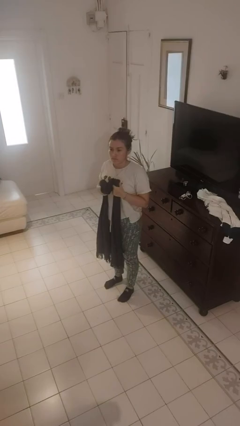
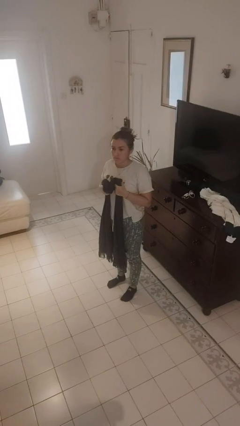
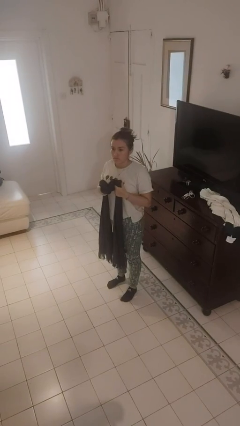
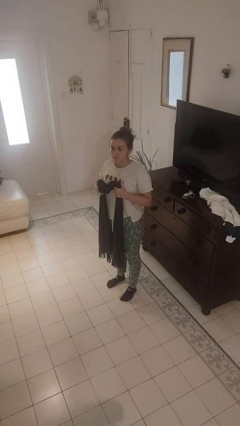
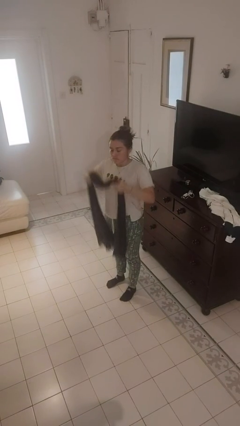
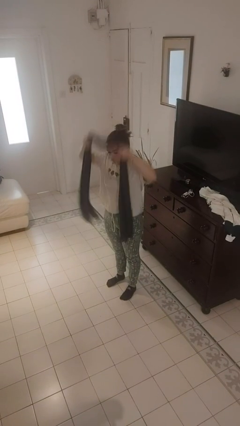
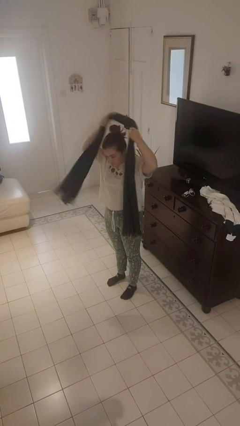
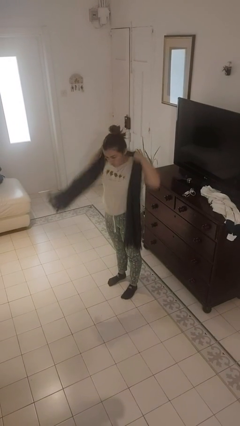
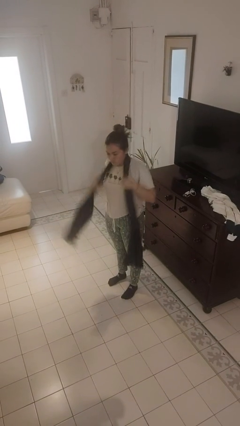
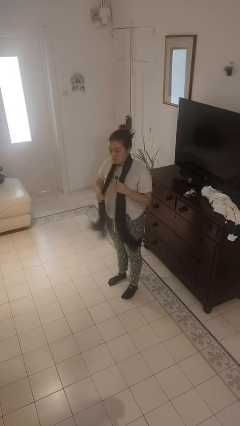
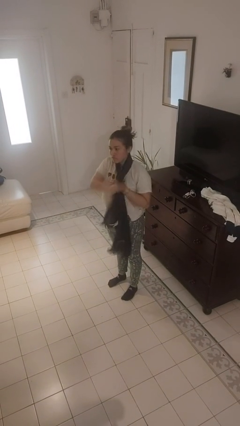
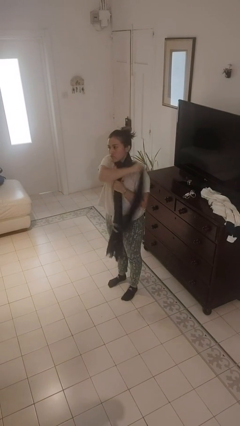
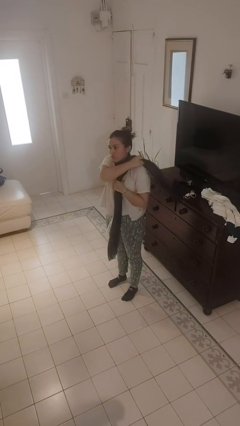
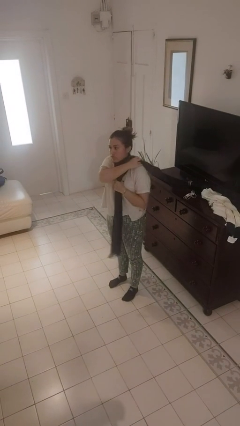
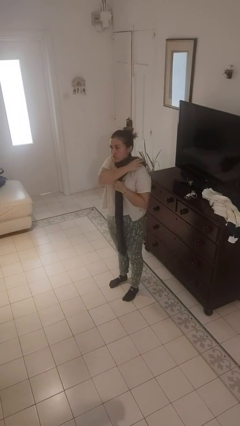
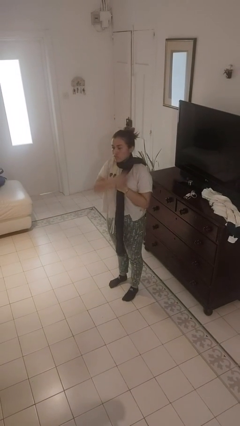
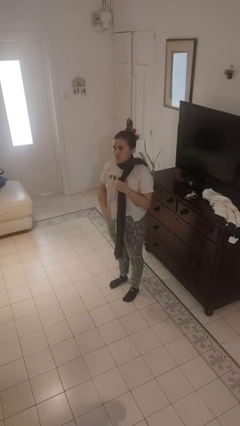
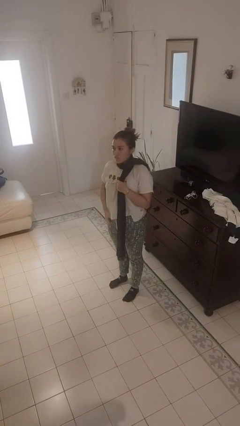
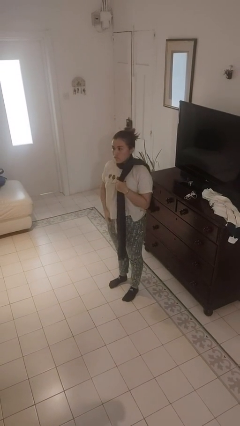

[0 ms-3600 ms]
person puts on scarf

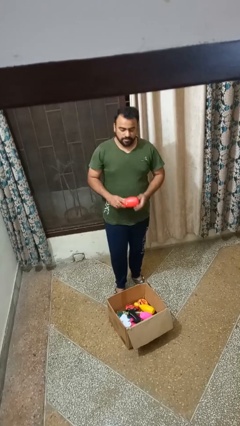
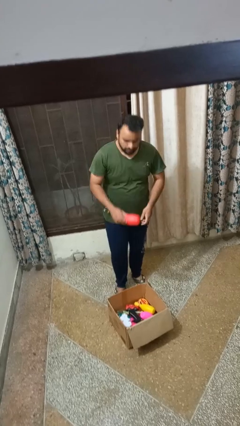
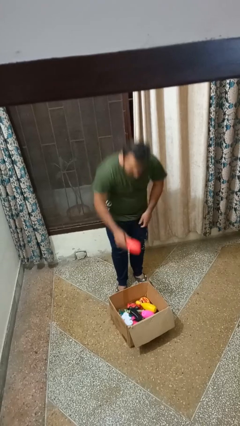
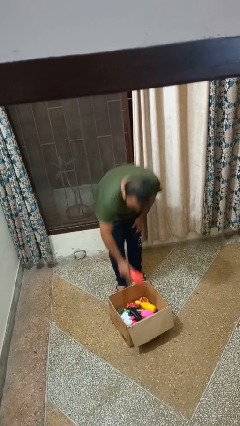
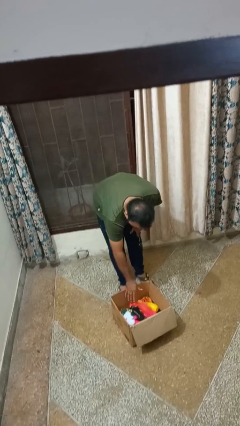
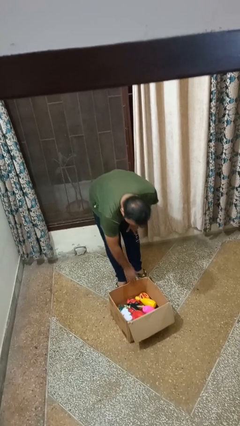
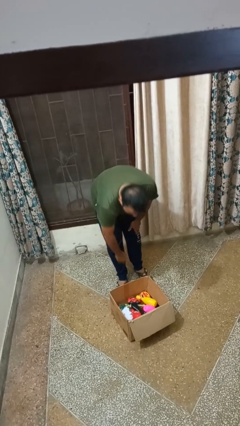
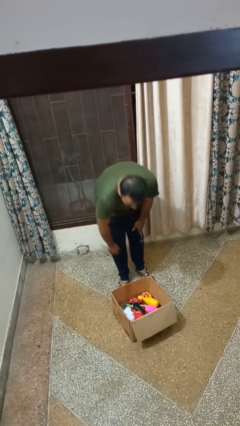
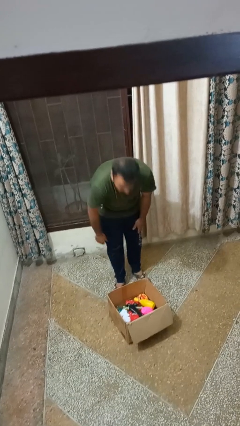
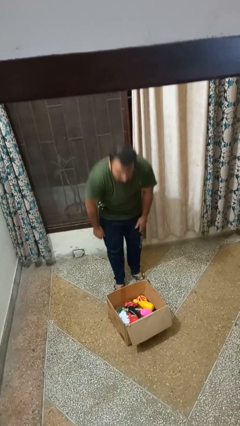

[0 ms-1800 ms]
person puts object into box

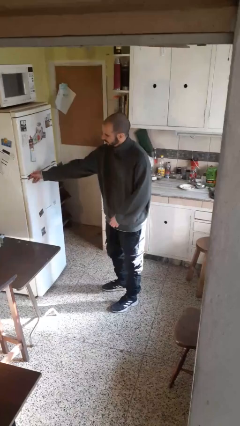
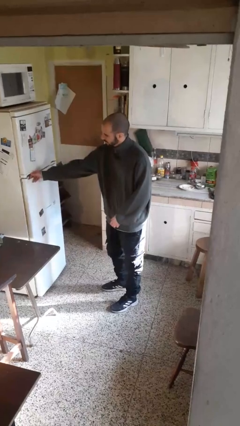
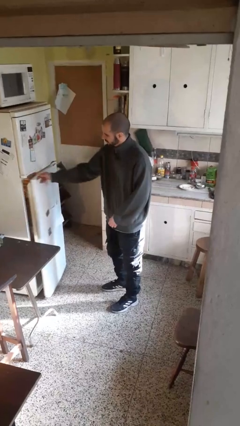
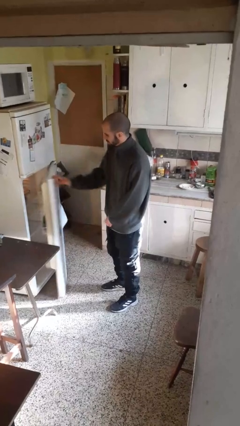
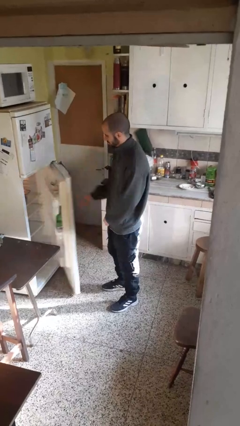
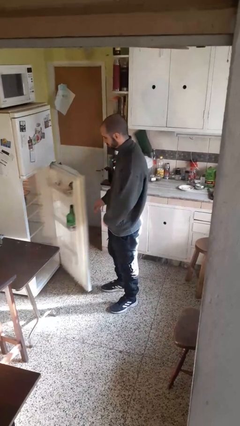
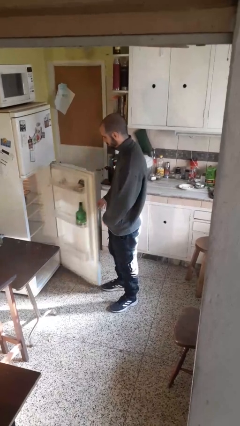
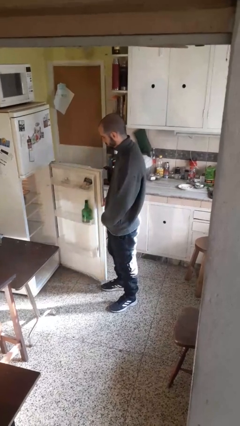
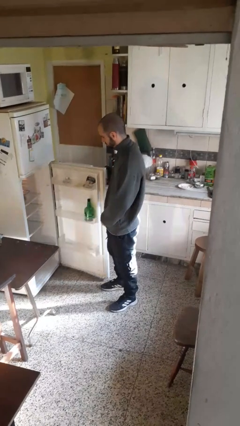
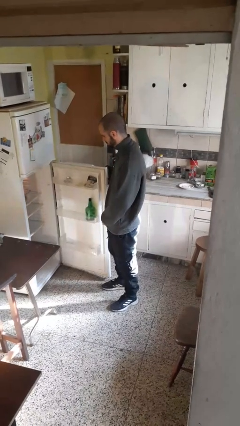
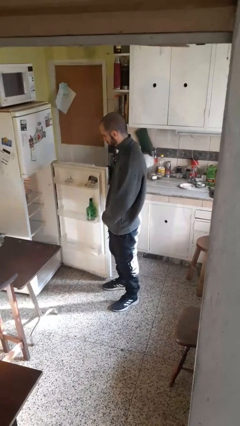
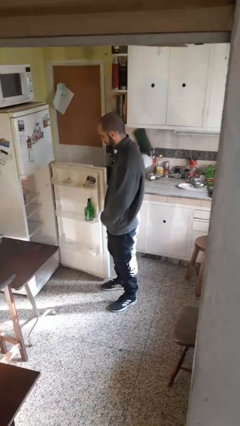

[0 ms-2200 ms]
person opens refrigerator

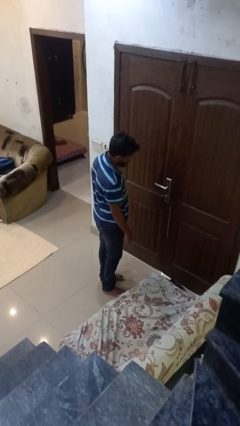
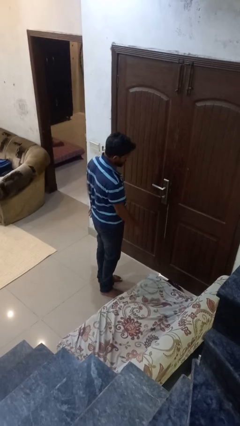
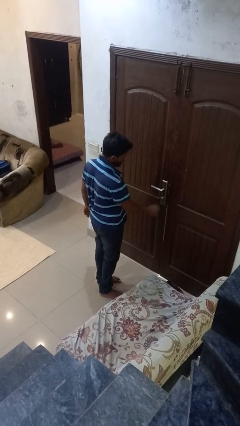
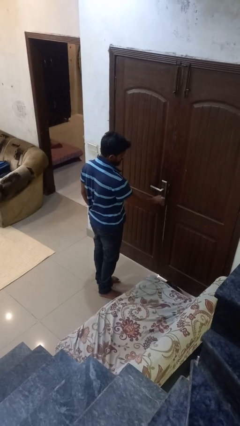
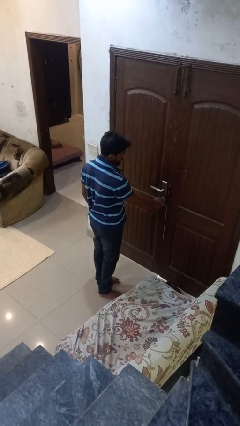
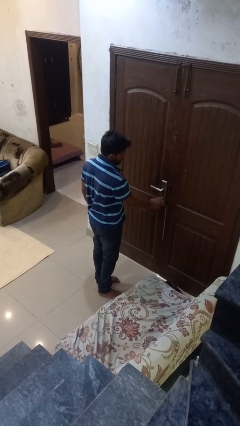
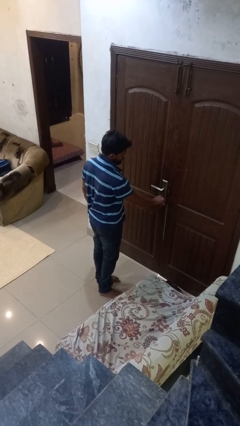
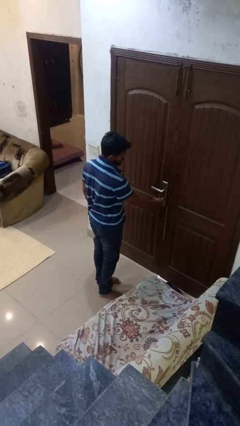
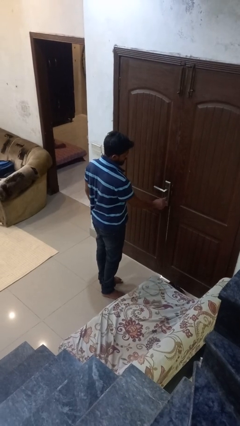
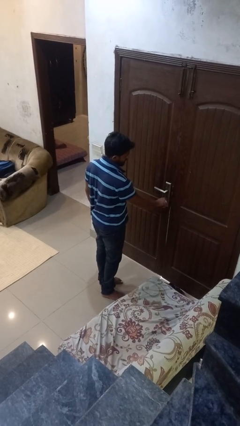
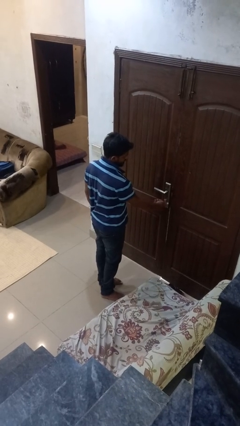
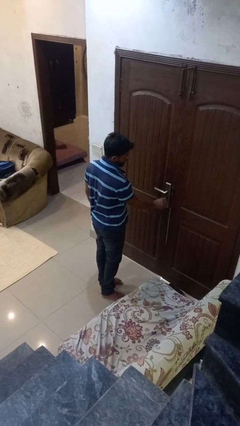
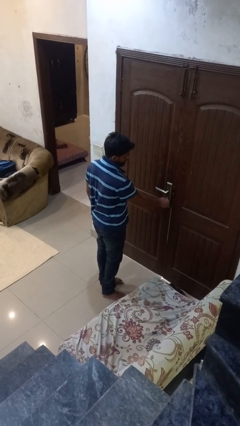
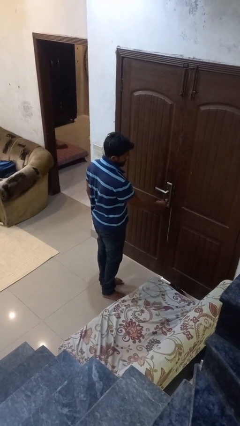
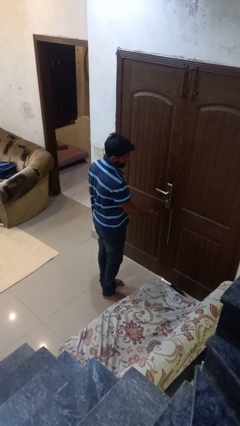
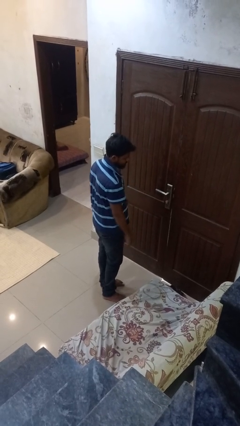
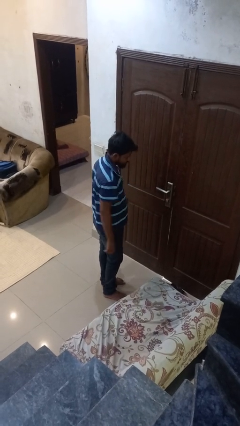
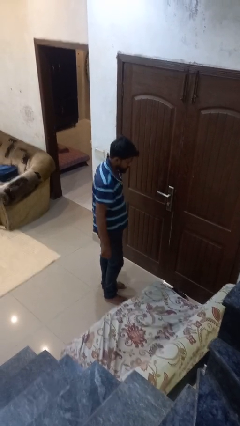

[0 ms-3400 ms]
person locks door with keys

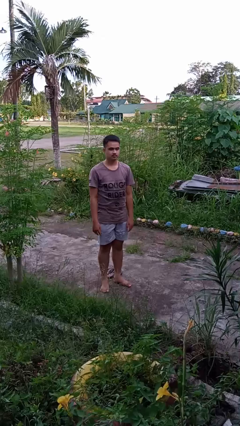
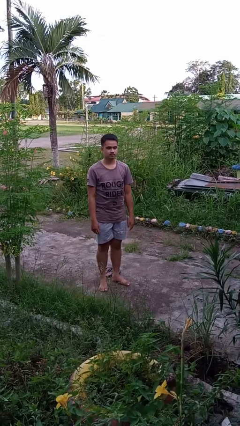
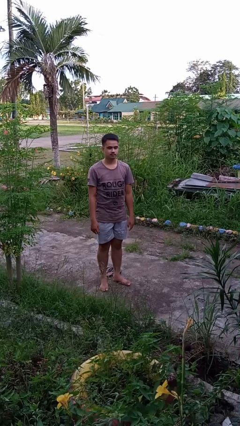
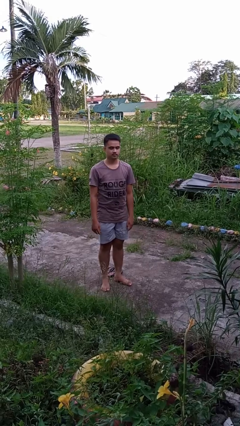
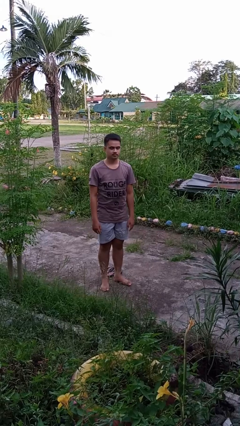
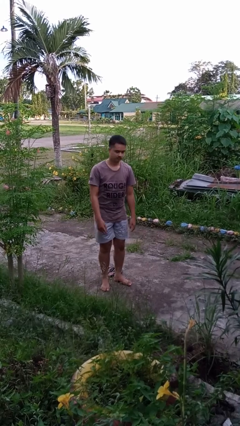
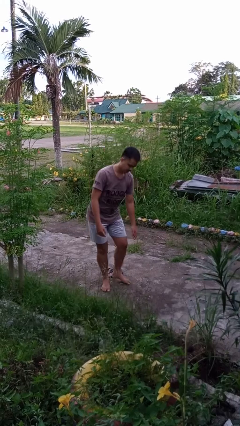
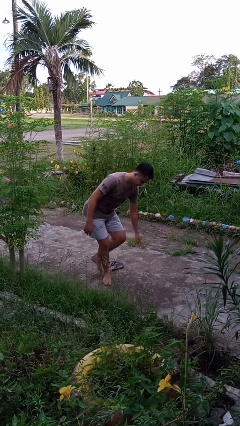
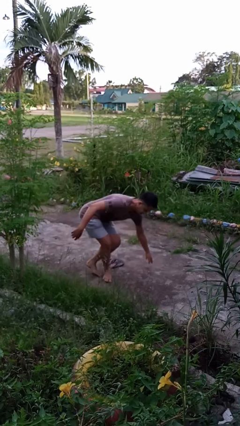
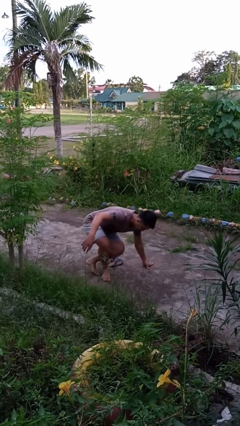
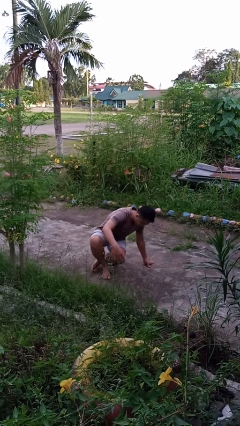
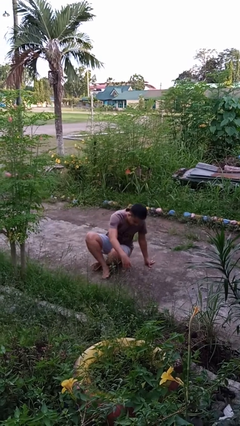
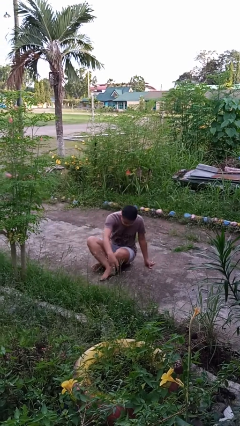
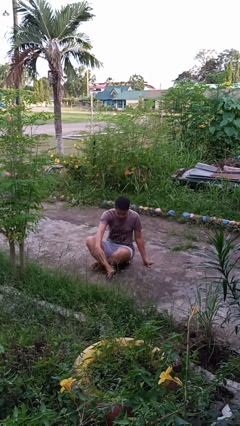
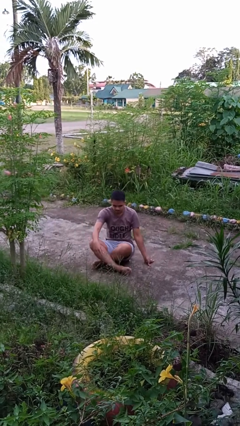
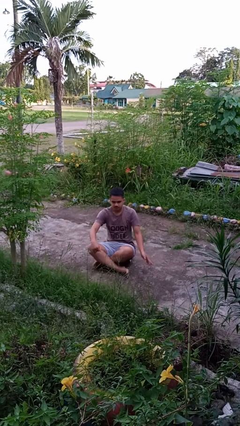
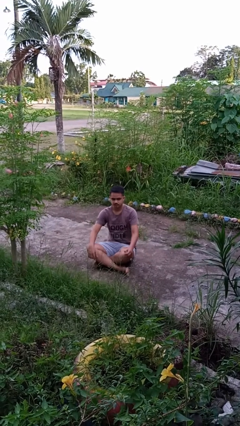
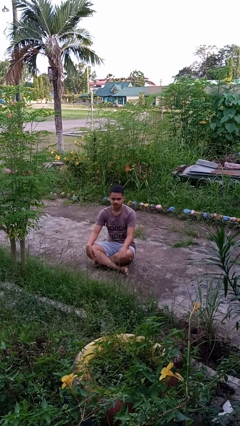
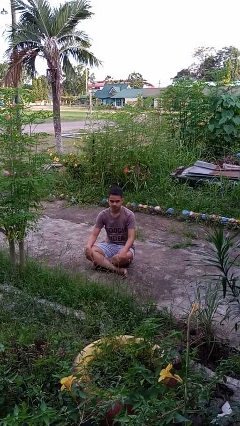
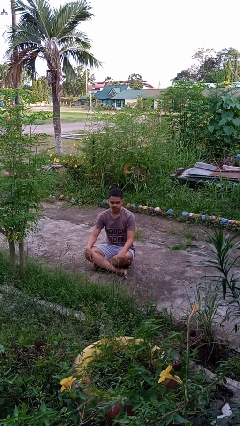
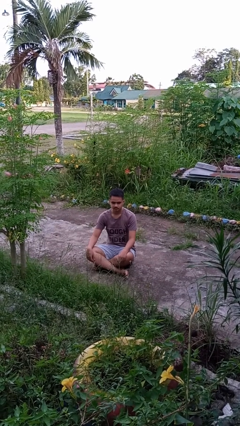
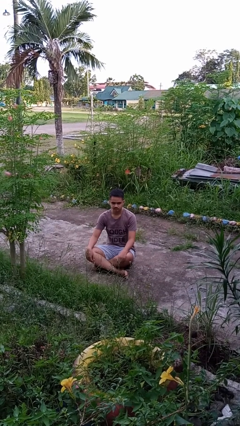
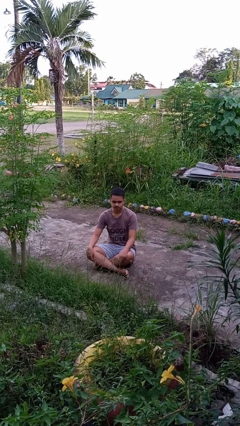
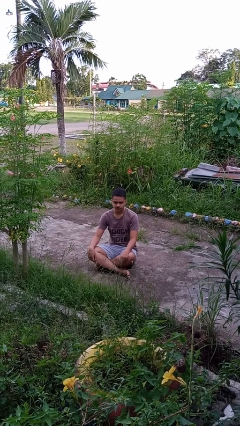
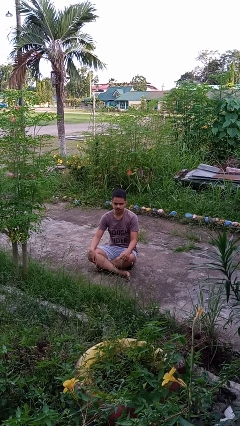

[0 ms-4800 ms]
person sits crisscross

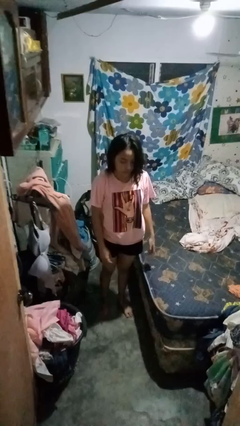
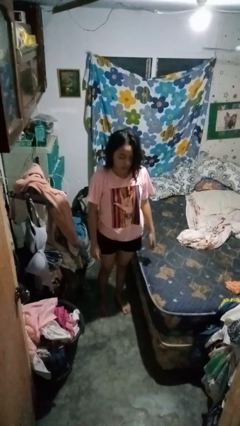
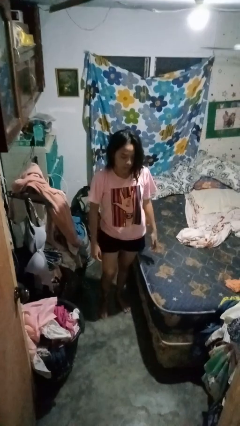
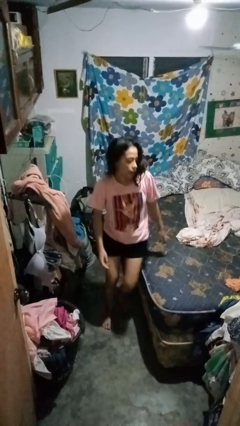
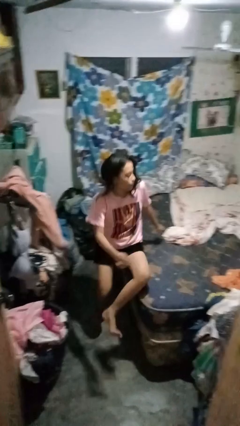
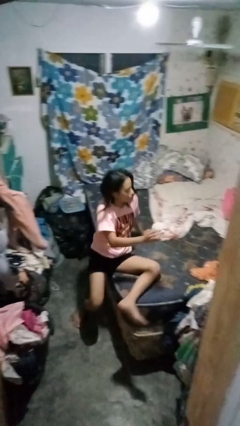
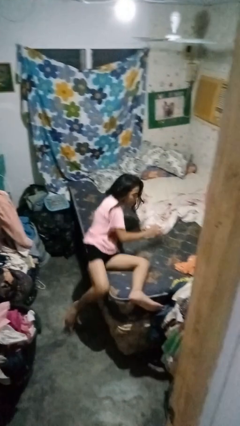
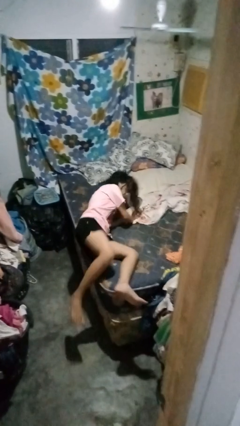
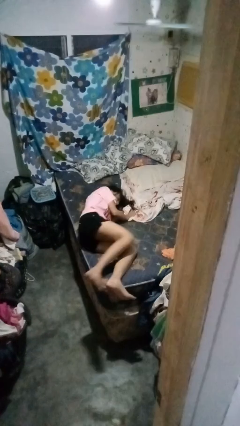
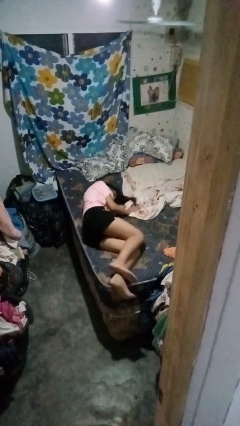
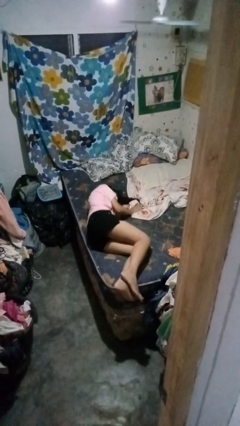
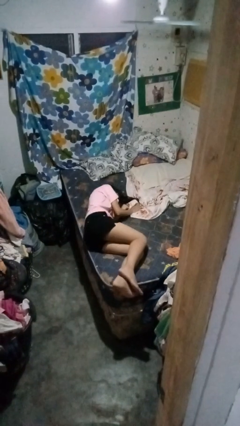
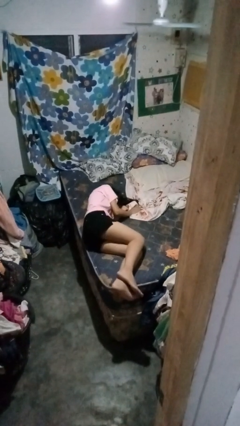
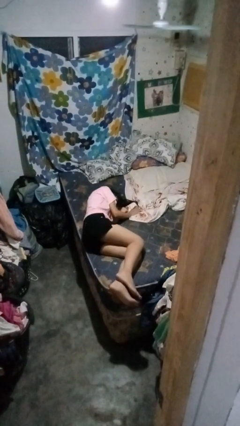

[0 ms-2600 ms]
person lies down on bed
